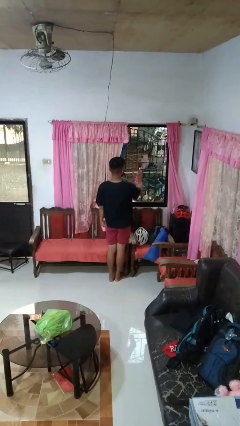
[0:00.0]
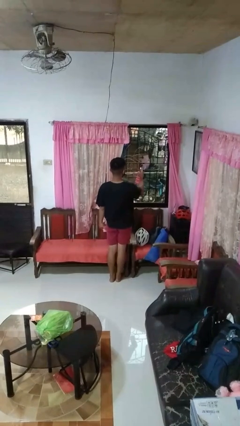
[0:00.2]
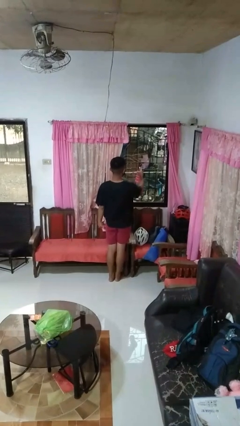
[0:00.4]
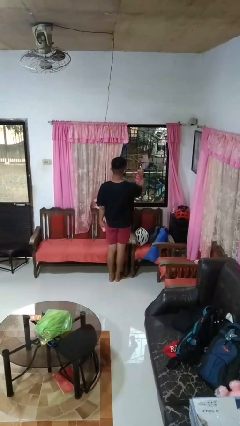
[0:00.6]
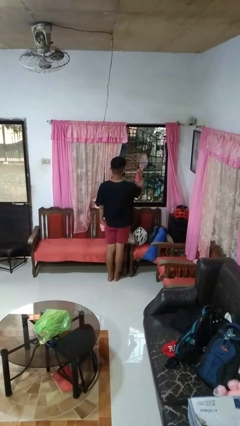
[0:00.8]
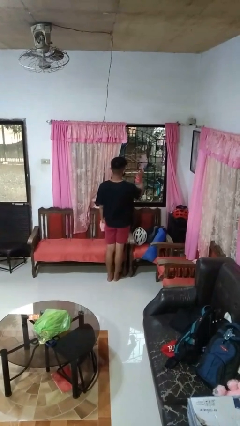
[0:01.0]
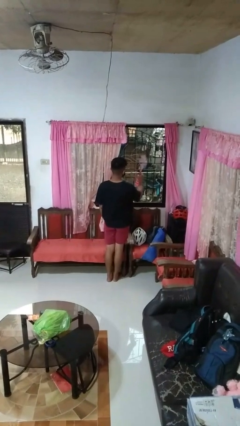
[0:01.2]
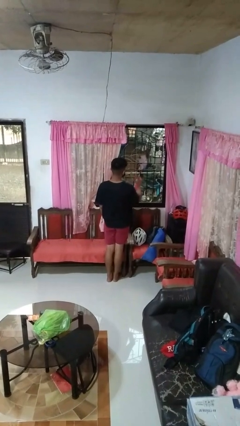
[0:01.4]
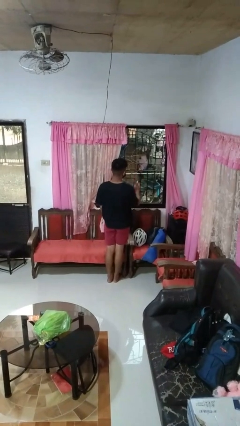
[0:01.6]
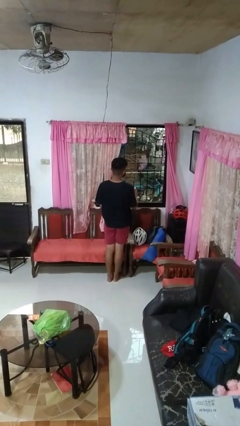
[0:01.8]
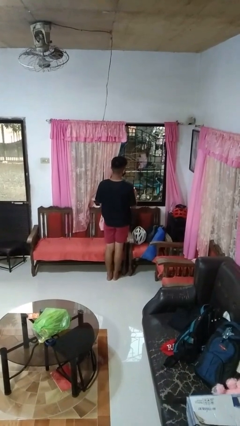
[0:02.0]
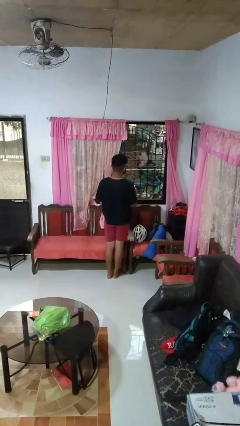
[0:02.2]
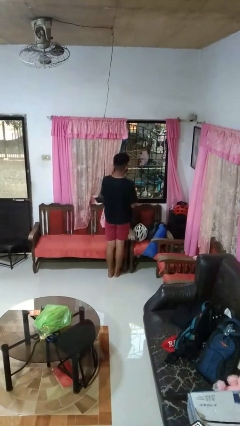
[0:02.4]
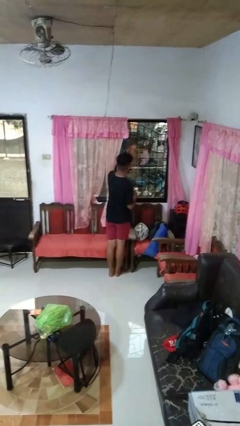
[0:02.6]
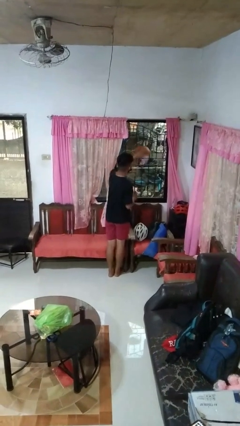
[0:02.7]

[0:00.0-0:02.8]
person sprays from bottle

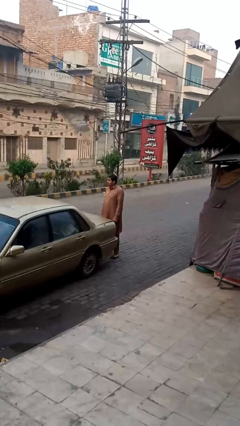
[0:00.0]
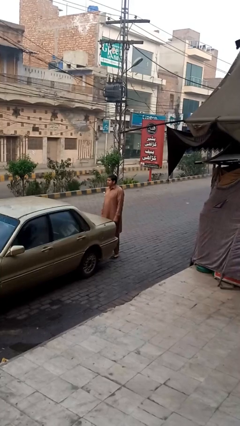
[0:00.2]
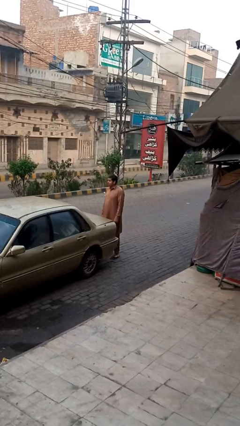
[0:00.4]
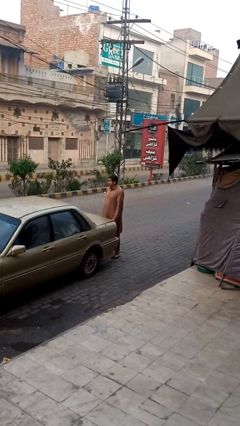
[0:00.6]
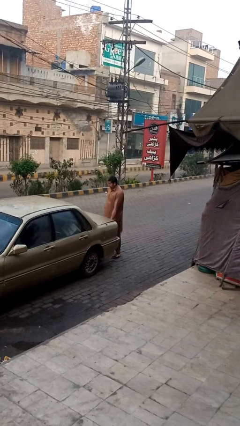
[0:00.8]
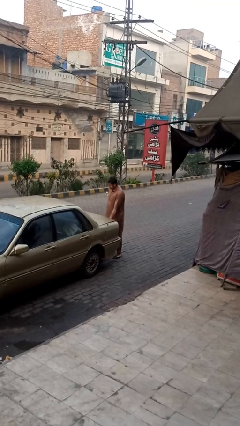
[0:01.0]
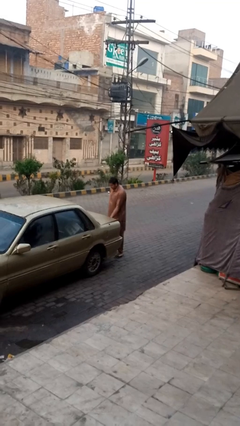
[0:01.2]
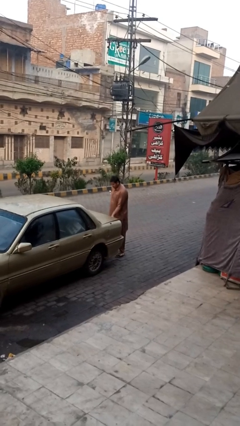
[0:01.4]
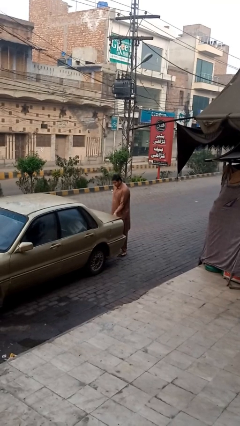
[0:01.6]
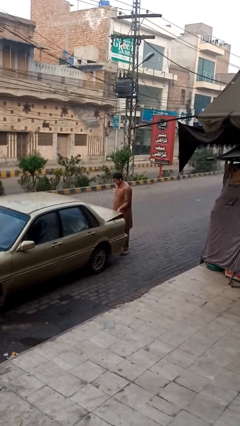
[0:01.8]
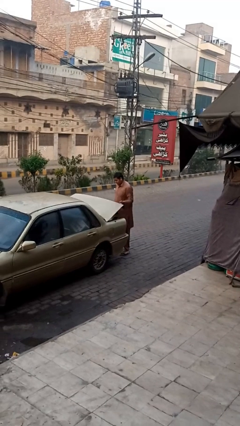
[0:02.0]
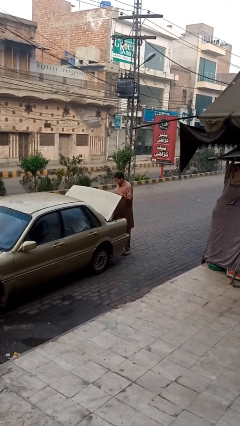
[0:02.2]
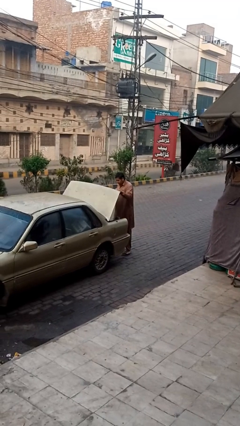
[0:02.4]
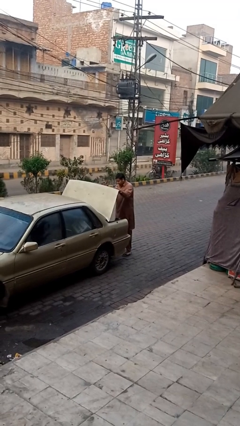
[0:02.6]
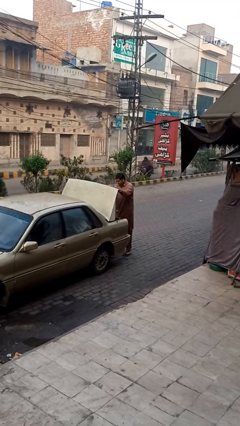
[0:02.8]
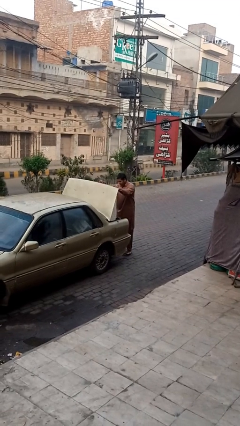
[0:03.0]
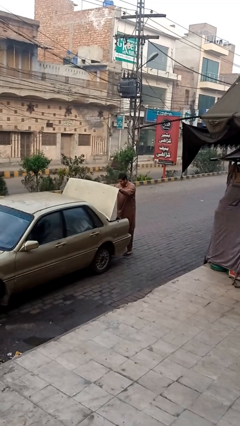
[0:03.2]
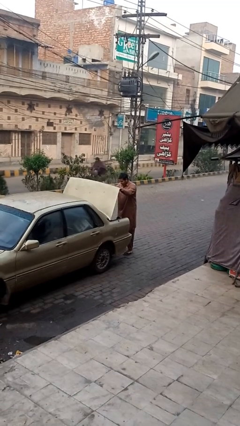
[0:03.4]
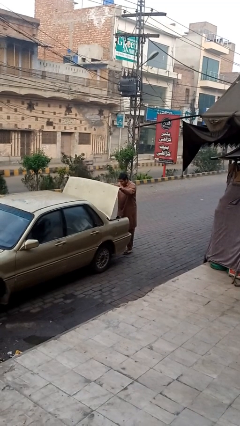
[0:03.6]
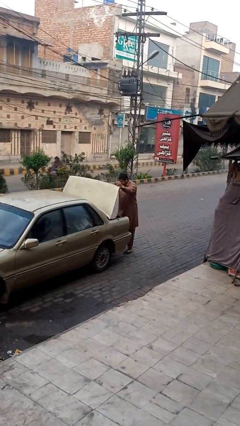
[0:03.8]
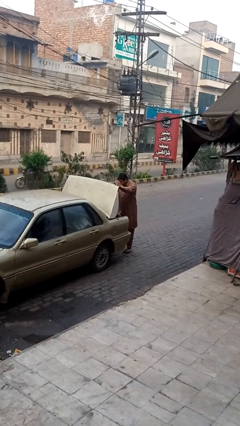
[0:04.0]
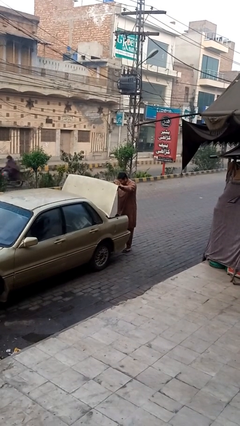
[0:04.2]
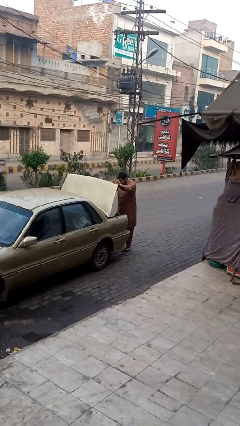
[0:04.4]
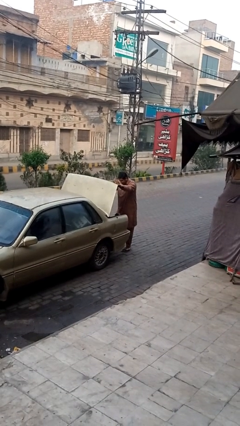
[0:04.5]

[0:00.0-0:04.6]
person opens car trunk

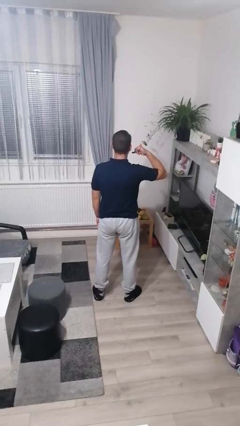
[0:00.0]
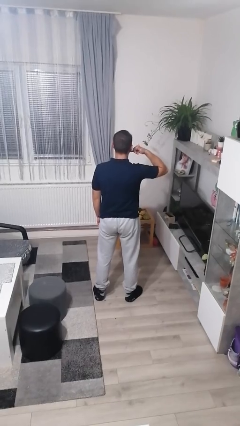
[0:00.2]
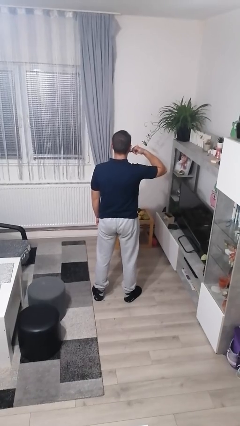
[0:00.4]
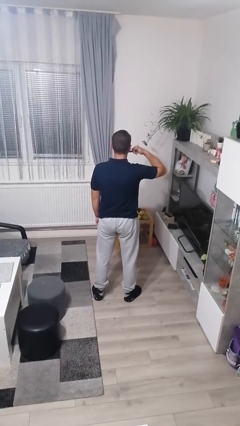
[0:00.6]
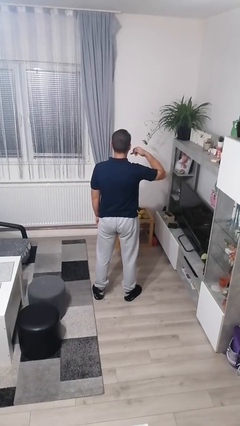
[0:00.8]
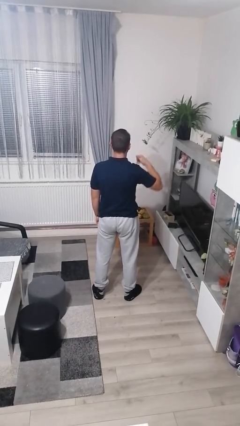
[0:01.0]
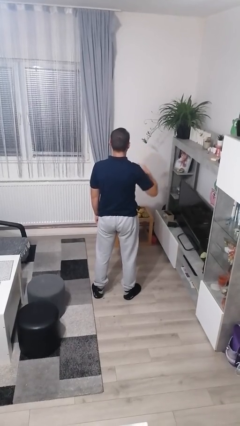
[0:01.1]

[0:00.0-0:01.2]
person gestures call me

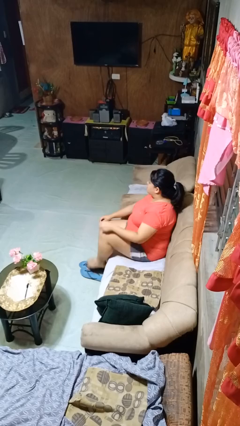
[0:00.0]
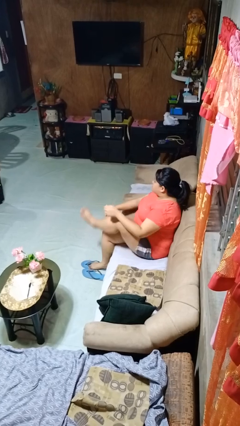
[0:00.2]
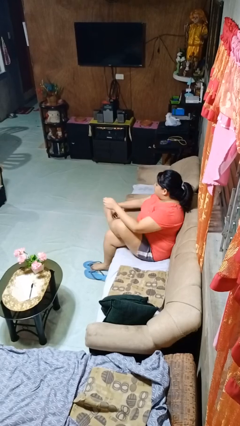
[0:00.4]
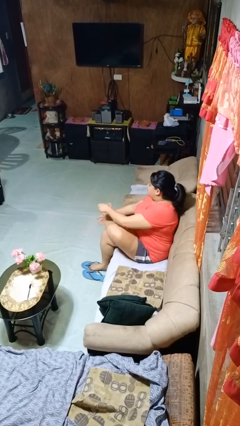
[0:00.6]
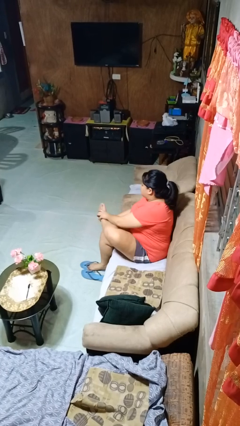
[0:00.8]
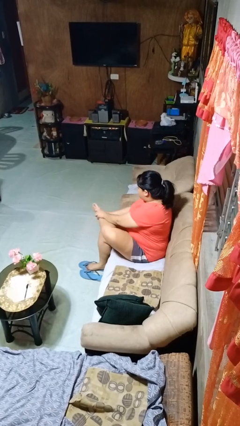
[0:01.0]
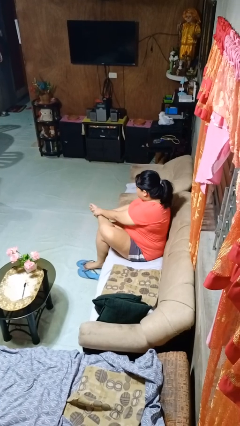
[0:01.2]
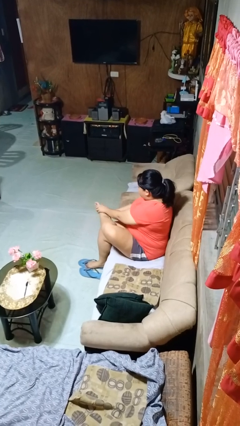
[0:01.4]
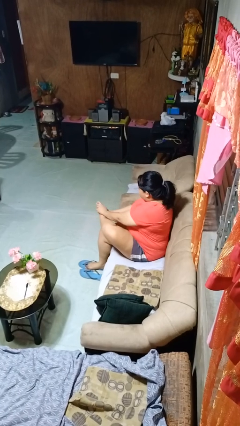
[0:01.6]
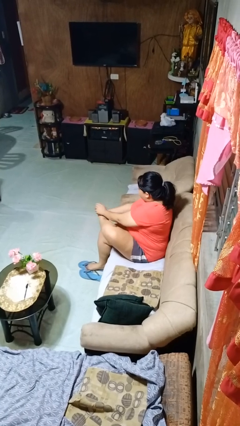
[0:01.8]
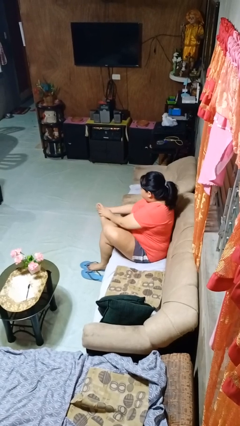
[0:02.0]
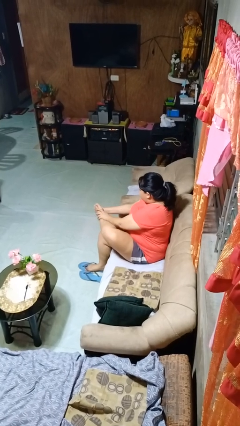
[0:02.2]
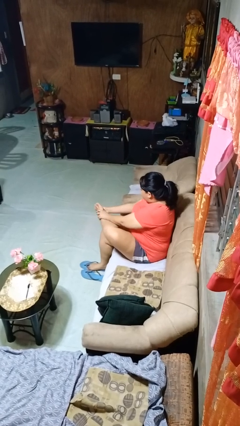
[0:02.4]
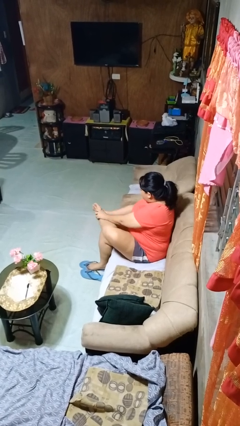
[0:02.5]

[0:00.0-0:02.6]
person rubs foot

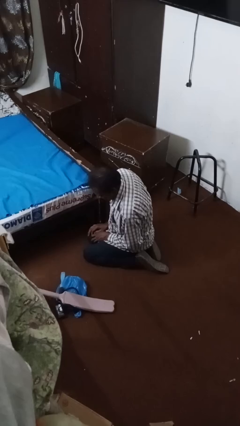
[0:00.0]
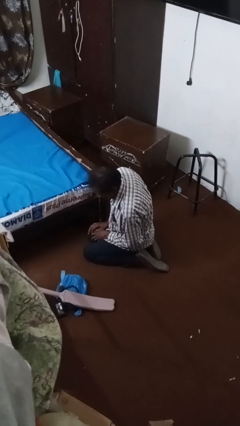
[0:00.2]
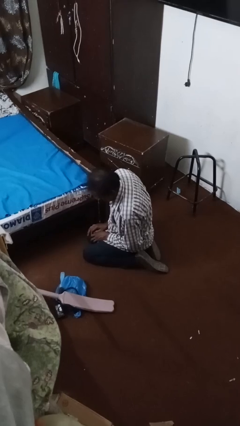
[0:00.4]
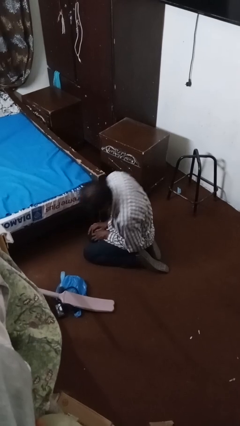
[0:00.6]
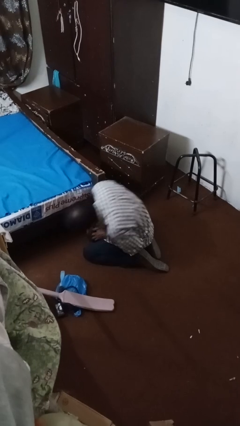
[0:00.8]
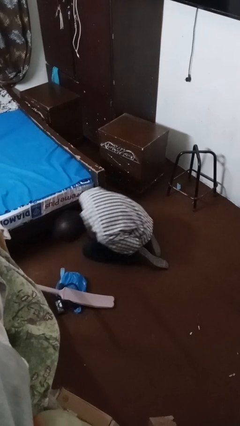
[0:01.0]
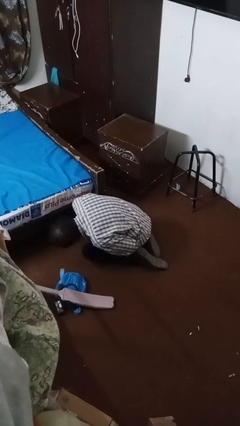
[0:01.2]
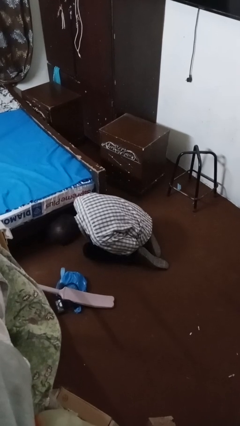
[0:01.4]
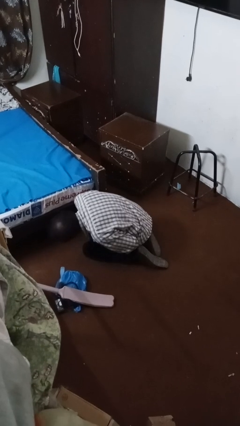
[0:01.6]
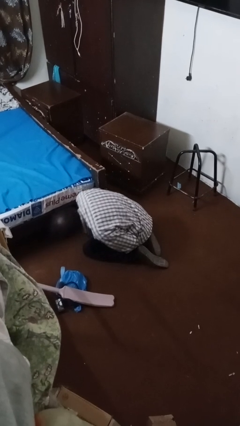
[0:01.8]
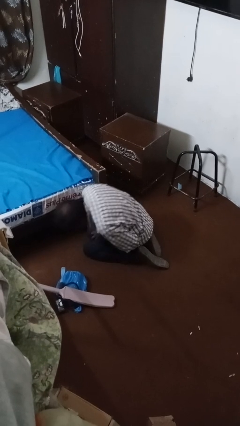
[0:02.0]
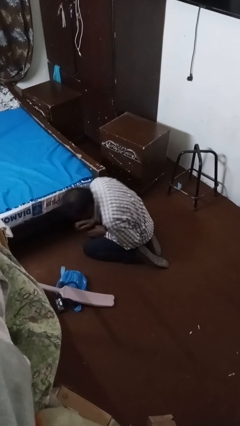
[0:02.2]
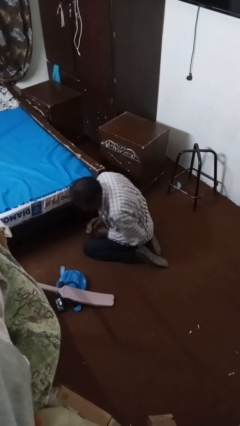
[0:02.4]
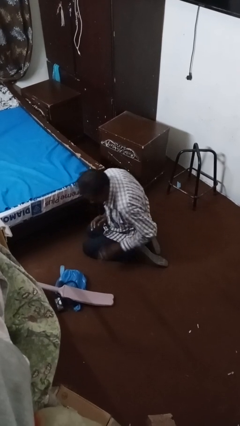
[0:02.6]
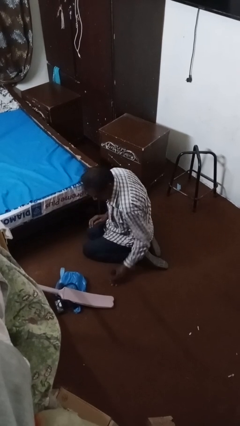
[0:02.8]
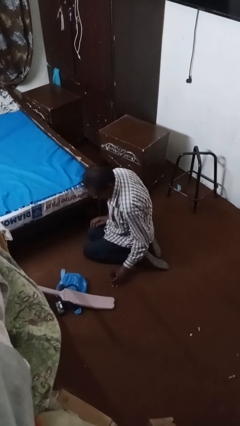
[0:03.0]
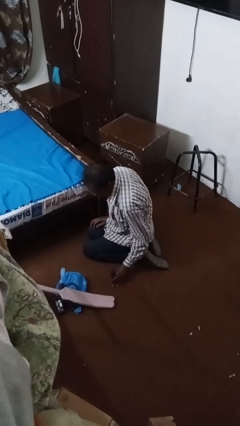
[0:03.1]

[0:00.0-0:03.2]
person searches under bed

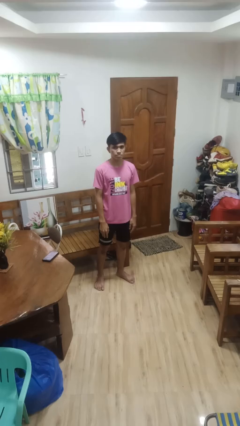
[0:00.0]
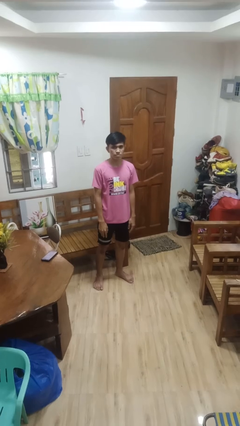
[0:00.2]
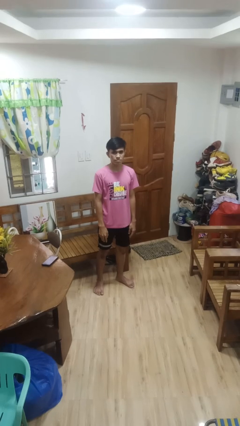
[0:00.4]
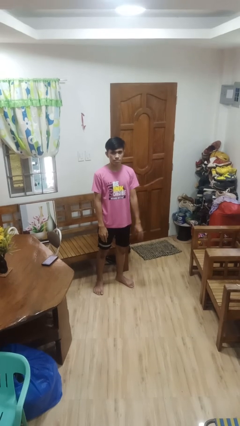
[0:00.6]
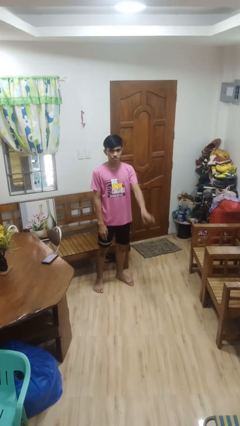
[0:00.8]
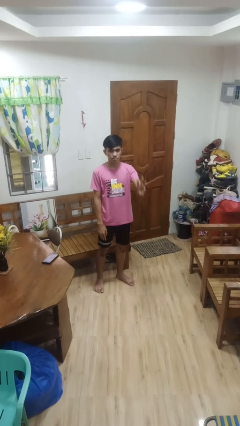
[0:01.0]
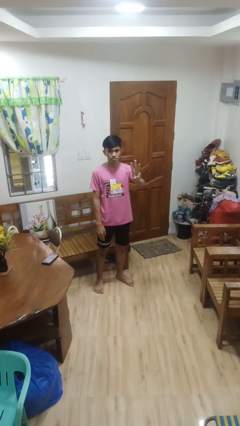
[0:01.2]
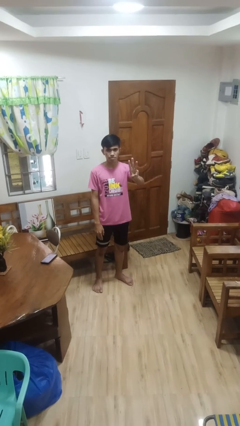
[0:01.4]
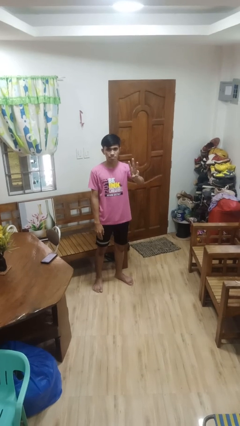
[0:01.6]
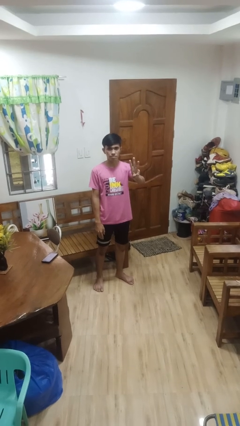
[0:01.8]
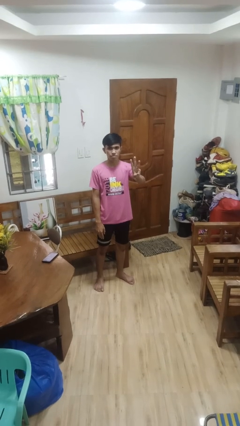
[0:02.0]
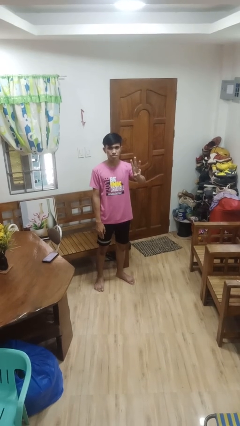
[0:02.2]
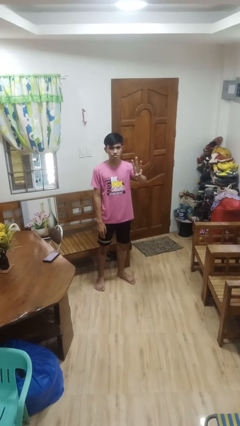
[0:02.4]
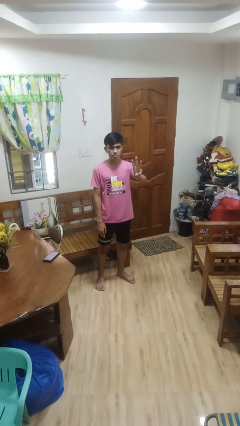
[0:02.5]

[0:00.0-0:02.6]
person gestures number three

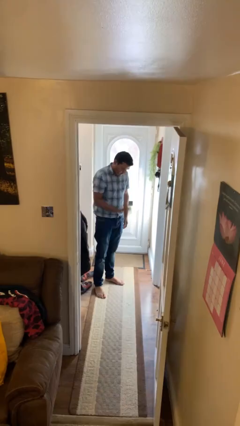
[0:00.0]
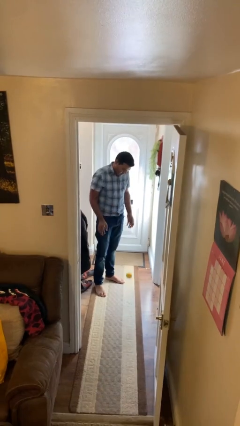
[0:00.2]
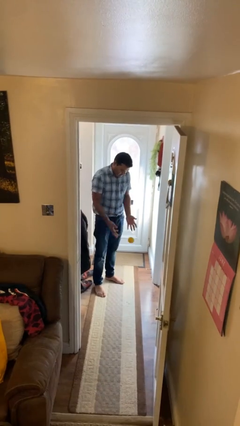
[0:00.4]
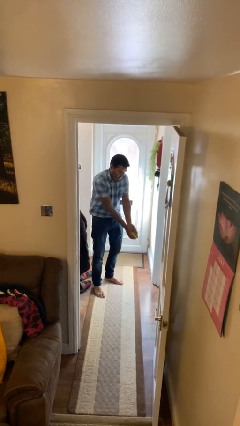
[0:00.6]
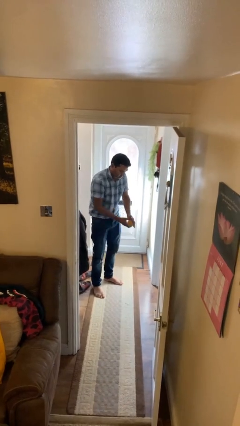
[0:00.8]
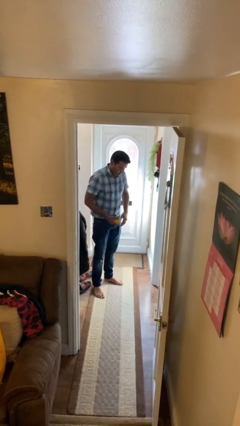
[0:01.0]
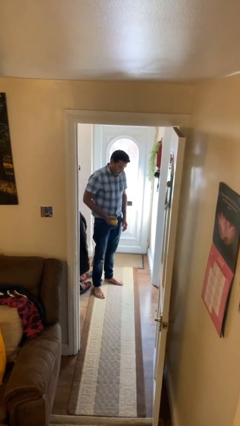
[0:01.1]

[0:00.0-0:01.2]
person bounces ball on floor
